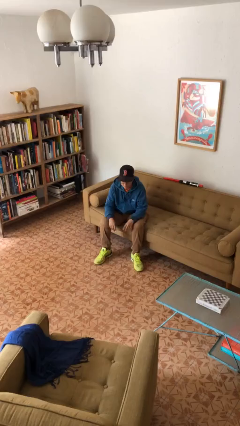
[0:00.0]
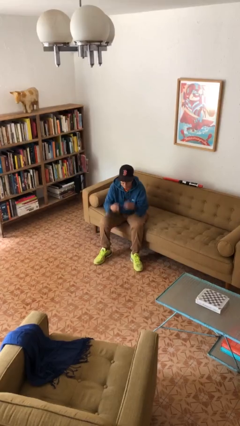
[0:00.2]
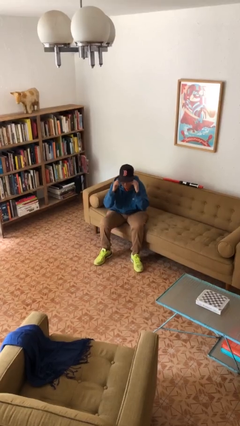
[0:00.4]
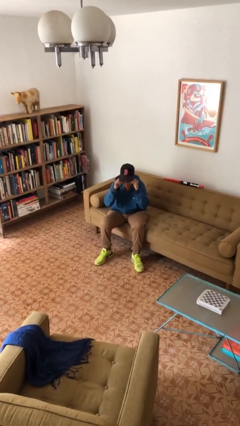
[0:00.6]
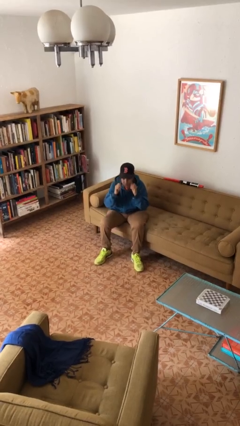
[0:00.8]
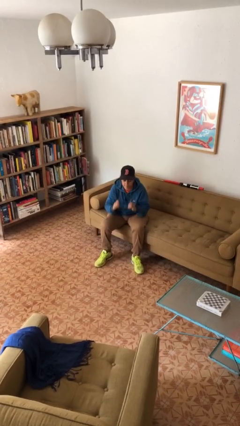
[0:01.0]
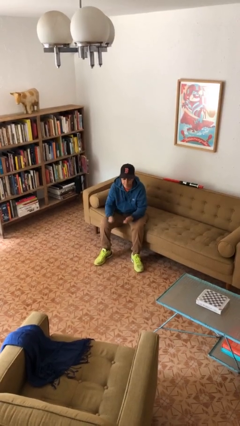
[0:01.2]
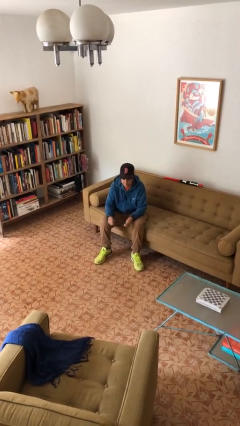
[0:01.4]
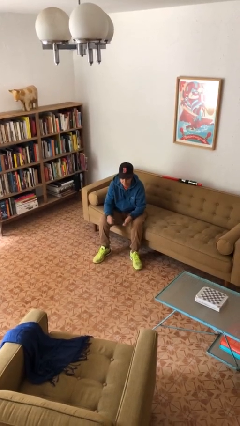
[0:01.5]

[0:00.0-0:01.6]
person takes off glasses

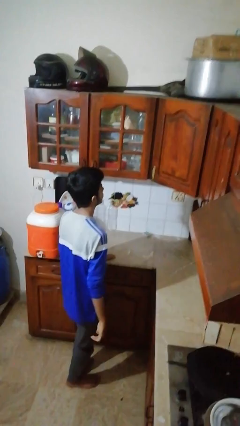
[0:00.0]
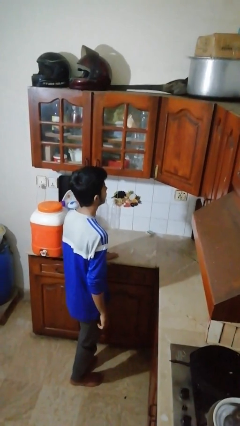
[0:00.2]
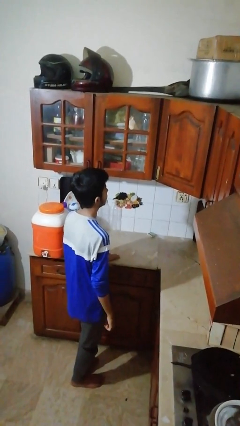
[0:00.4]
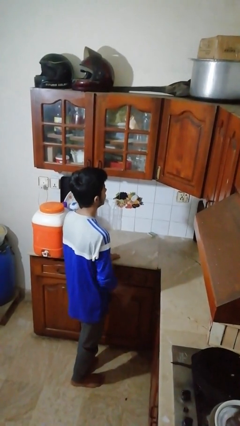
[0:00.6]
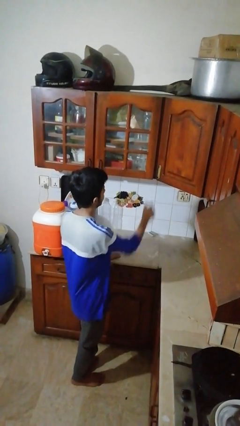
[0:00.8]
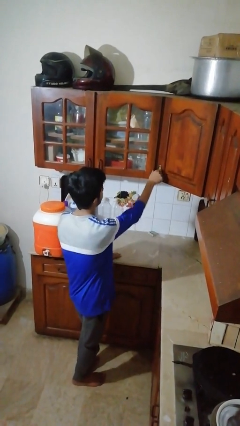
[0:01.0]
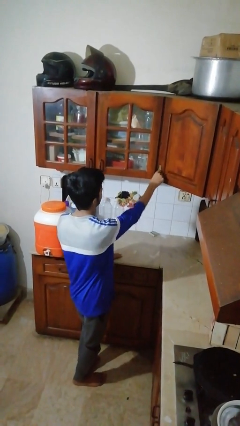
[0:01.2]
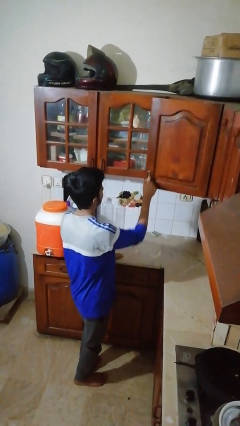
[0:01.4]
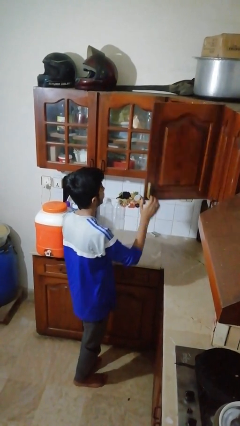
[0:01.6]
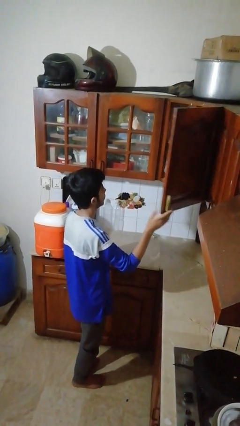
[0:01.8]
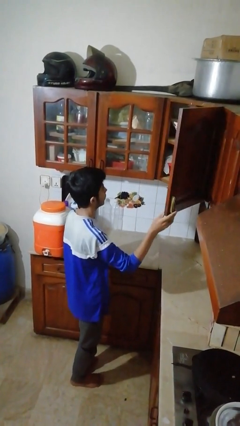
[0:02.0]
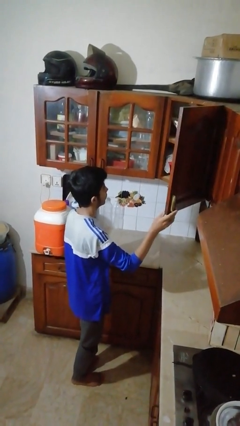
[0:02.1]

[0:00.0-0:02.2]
person opens cabinet

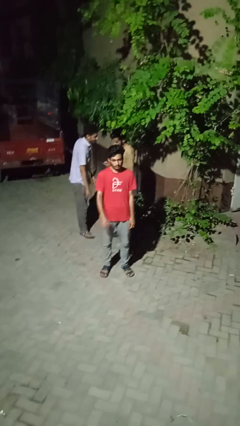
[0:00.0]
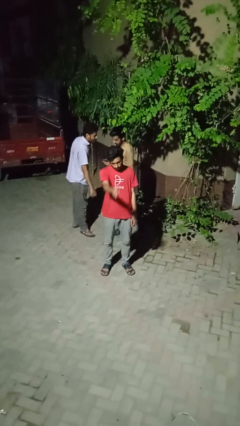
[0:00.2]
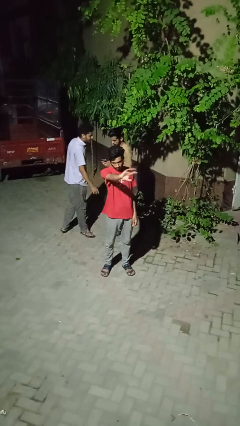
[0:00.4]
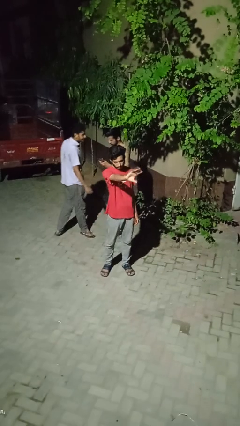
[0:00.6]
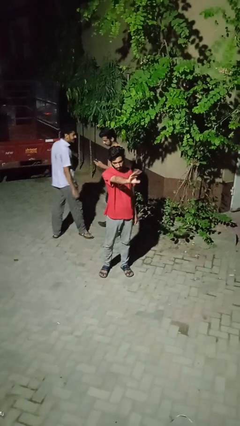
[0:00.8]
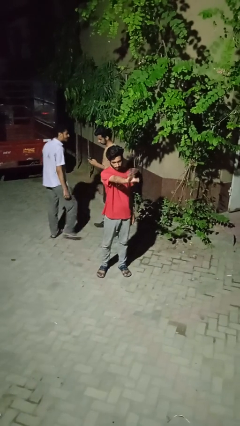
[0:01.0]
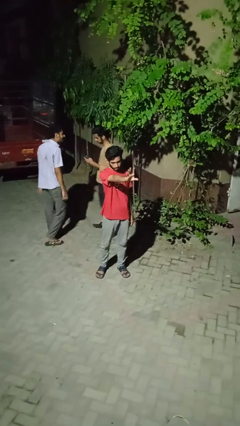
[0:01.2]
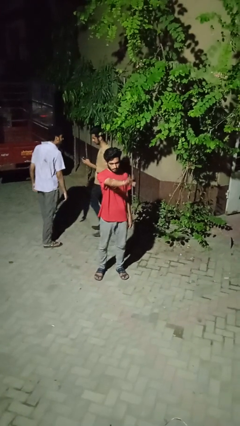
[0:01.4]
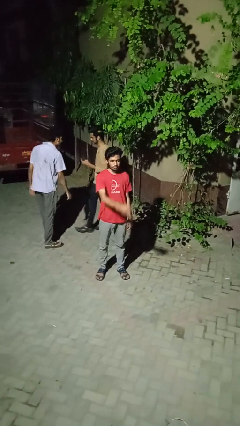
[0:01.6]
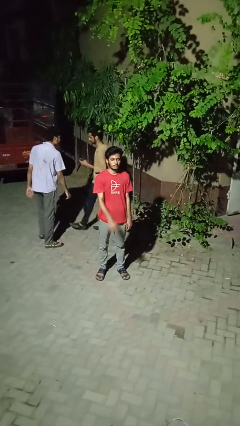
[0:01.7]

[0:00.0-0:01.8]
person waves at person

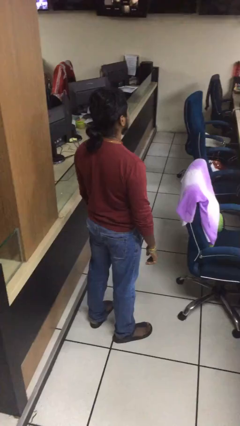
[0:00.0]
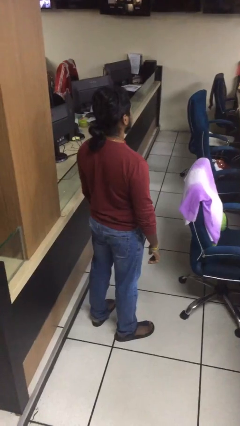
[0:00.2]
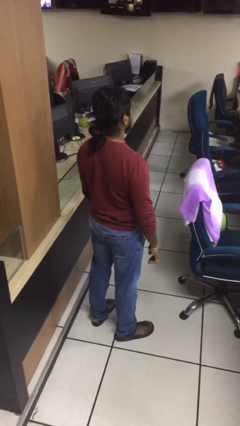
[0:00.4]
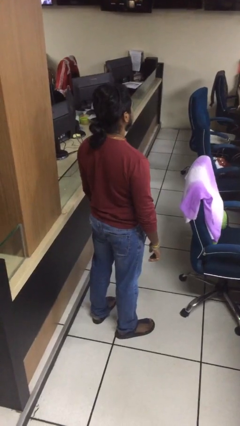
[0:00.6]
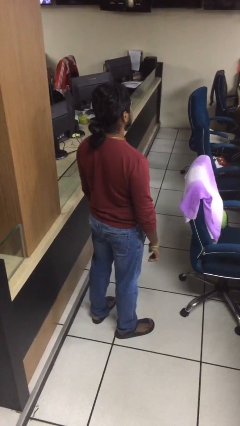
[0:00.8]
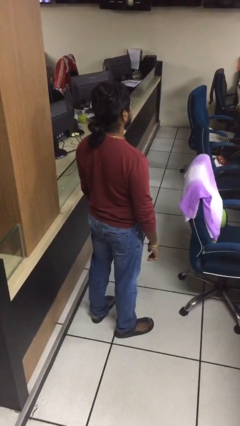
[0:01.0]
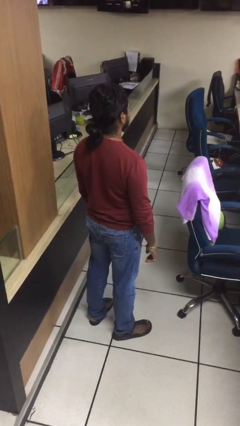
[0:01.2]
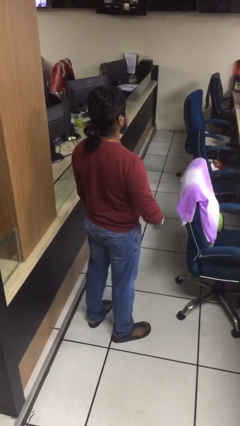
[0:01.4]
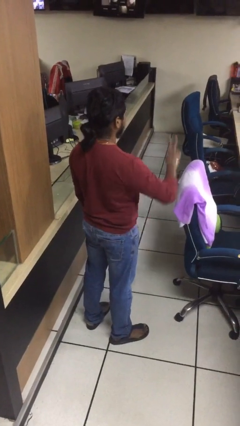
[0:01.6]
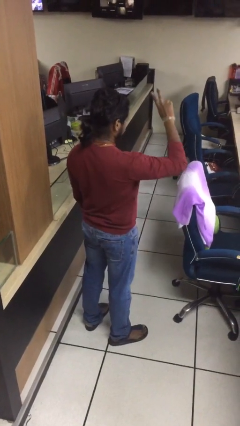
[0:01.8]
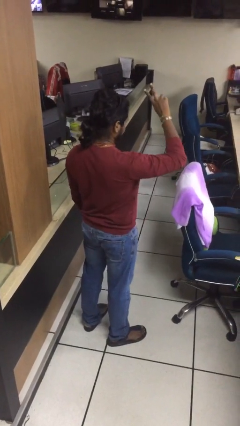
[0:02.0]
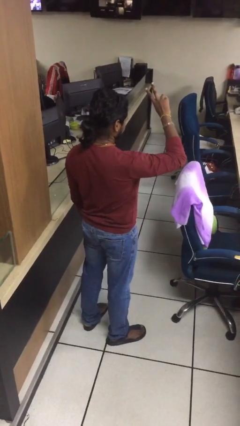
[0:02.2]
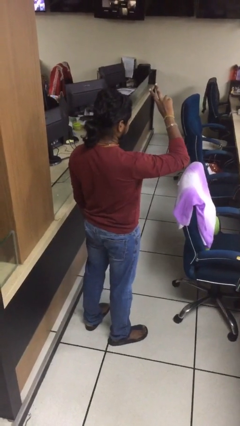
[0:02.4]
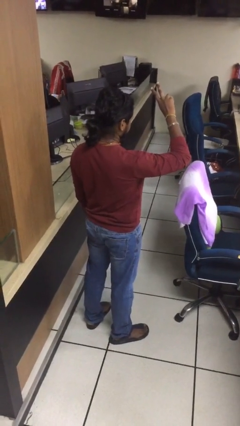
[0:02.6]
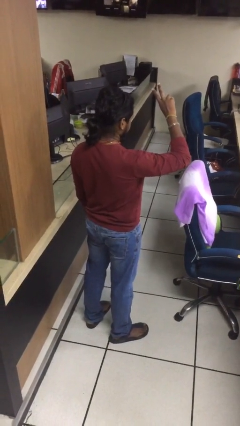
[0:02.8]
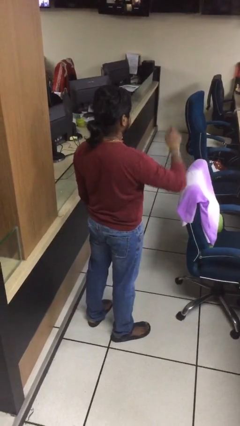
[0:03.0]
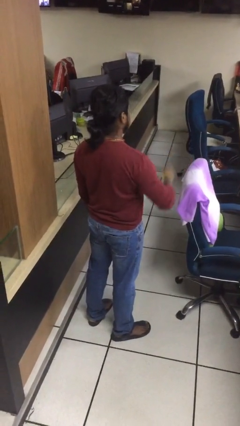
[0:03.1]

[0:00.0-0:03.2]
person gestures peace

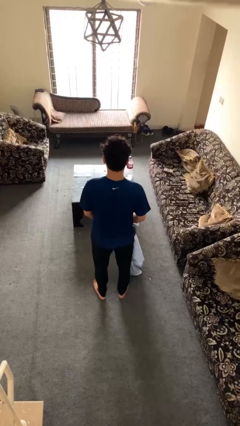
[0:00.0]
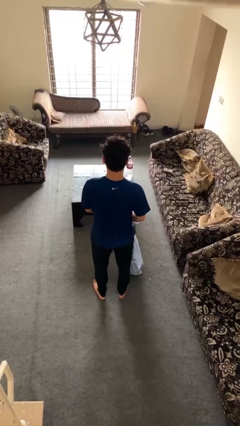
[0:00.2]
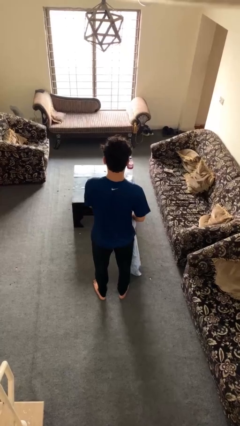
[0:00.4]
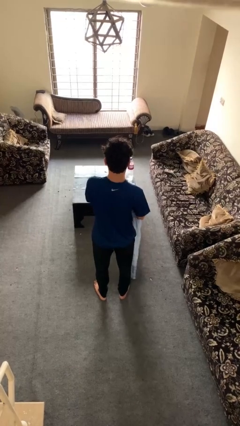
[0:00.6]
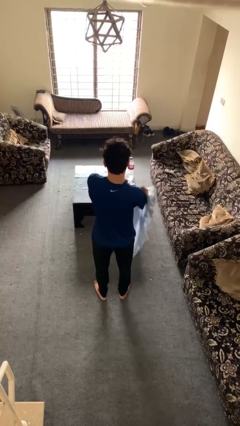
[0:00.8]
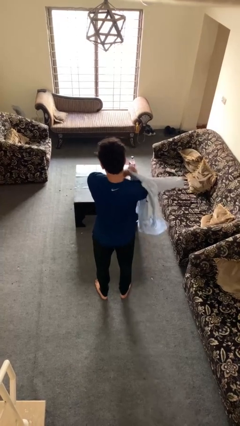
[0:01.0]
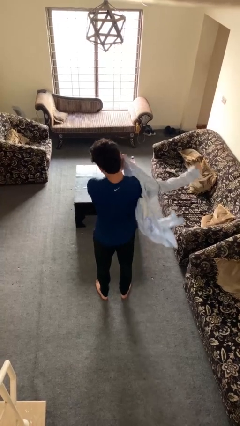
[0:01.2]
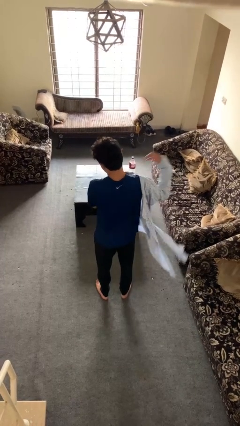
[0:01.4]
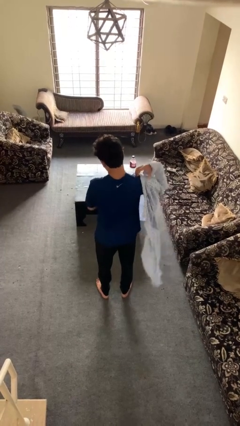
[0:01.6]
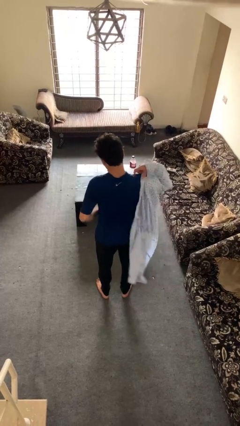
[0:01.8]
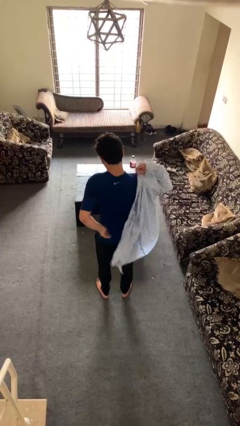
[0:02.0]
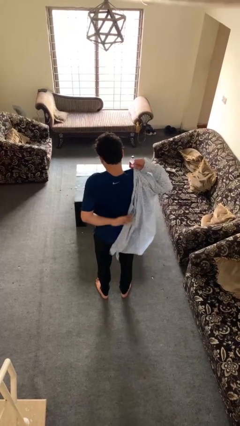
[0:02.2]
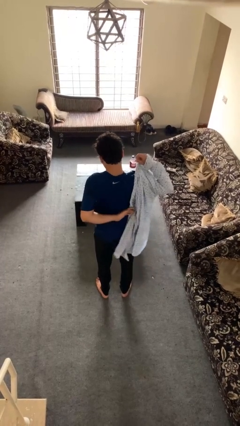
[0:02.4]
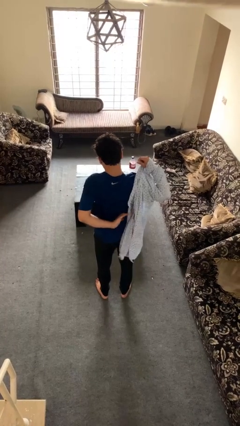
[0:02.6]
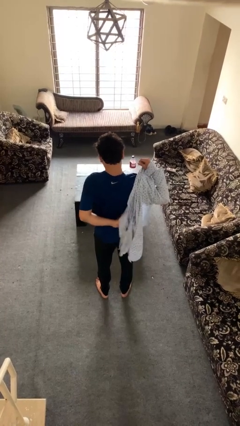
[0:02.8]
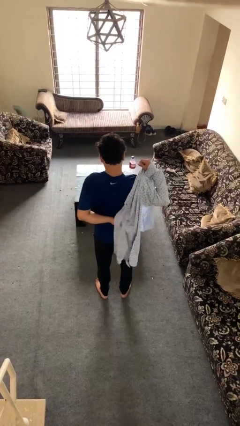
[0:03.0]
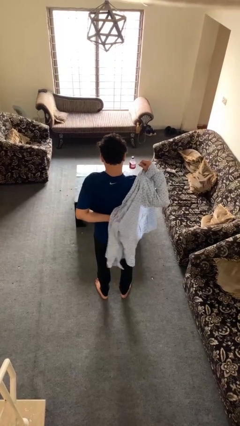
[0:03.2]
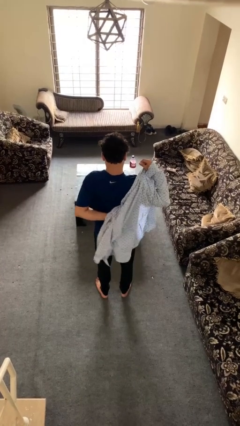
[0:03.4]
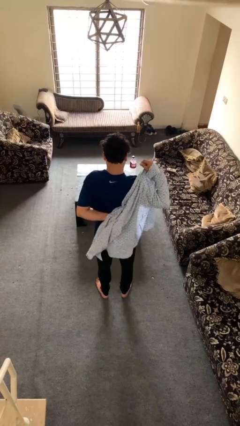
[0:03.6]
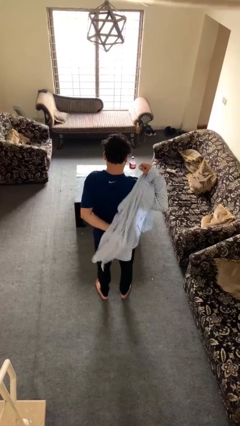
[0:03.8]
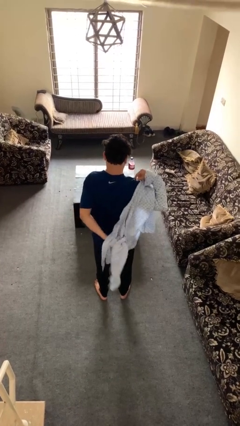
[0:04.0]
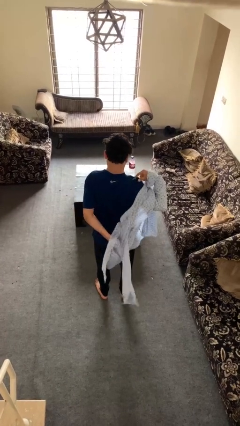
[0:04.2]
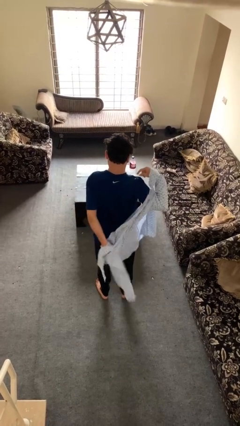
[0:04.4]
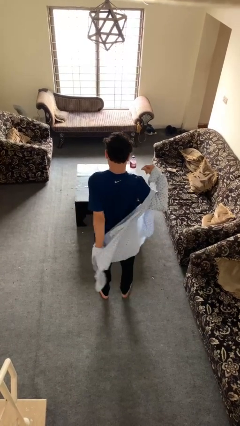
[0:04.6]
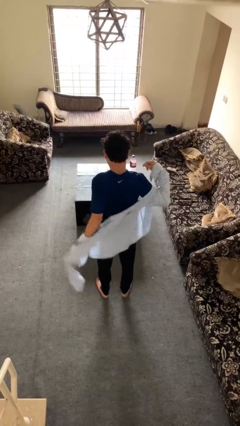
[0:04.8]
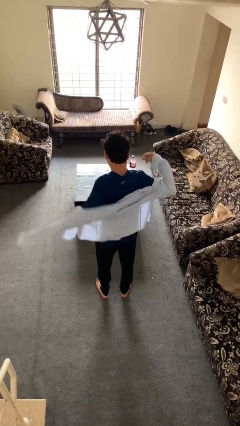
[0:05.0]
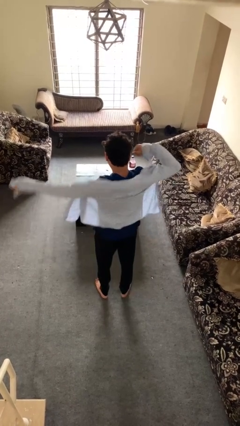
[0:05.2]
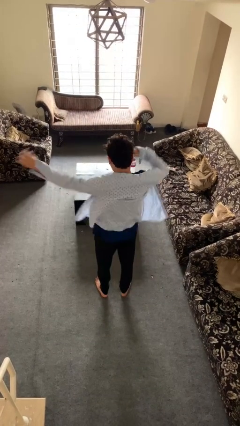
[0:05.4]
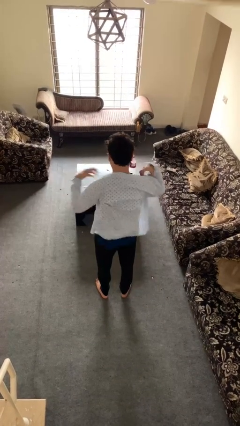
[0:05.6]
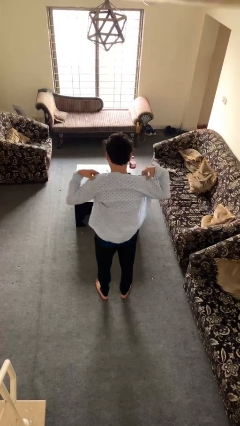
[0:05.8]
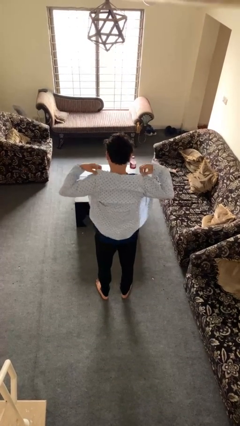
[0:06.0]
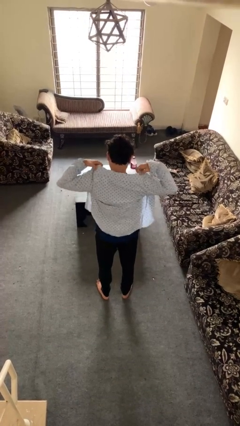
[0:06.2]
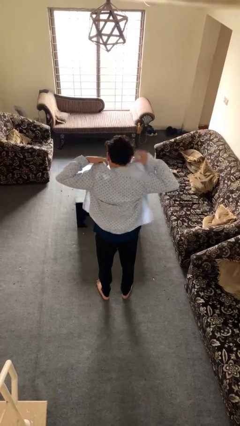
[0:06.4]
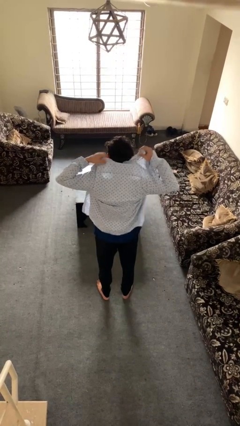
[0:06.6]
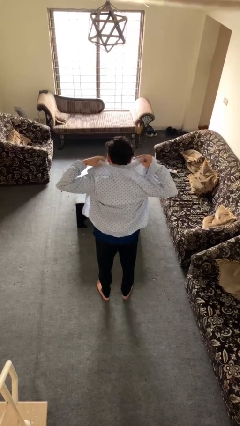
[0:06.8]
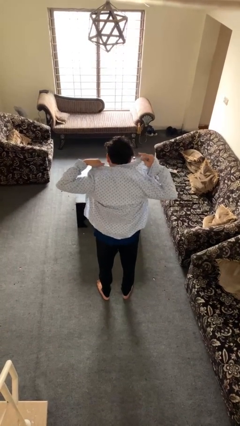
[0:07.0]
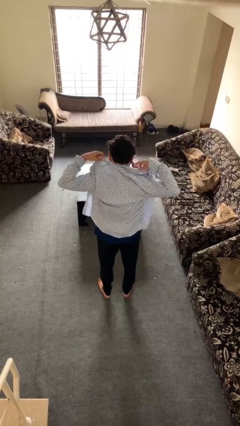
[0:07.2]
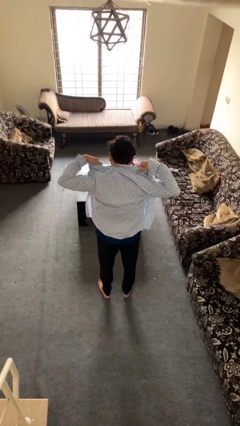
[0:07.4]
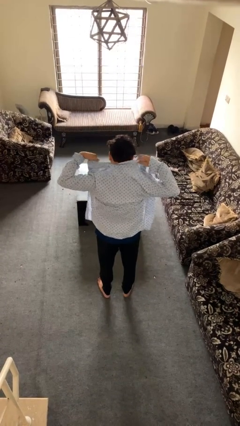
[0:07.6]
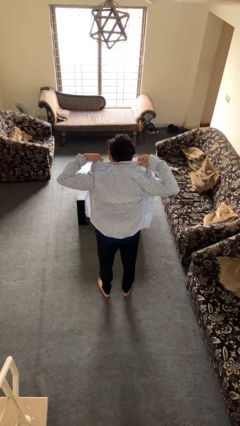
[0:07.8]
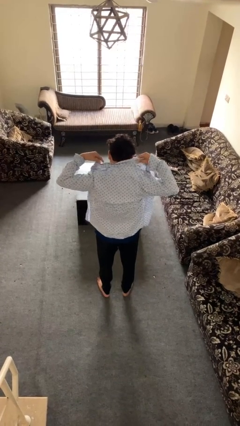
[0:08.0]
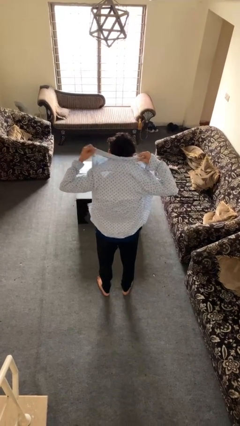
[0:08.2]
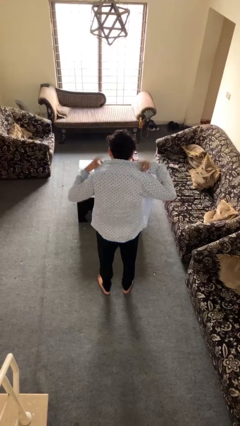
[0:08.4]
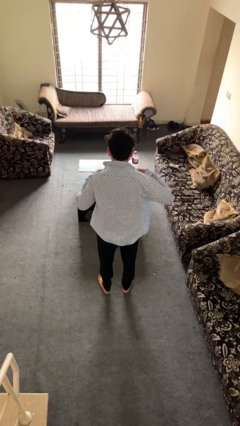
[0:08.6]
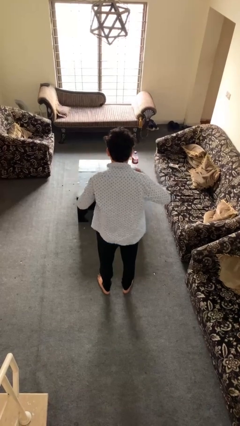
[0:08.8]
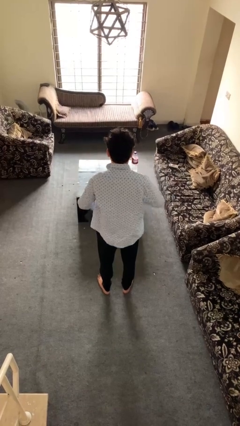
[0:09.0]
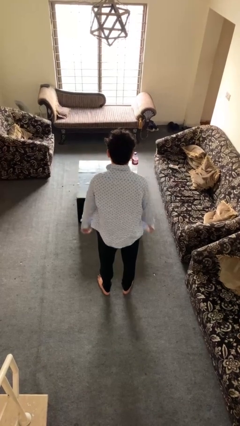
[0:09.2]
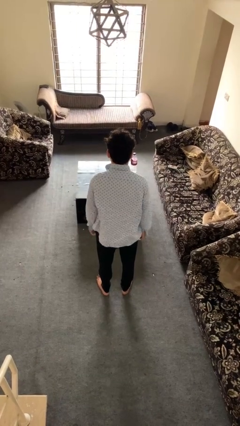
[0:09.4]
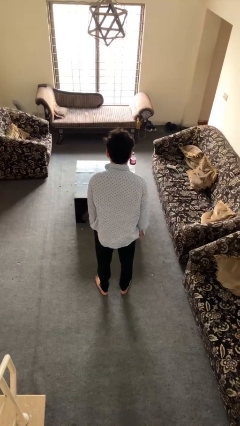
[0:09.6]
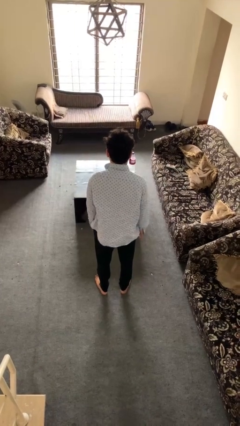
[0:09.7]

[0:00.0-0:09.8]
person puts on shirt
